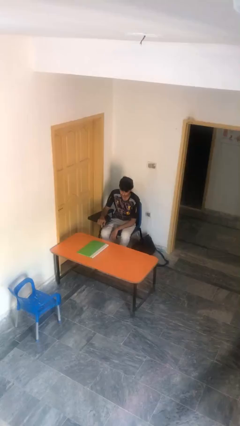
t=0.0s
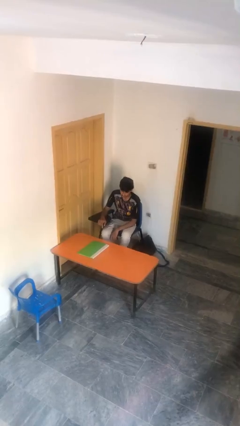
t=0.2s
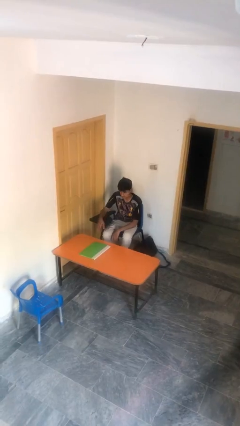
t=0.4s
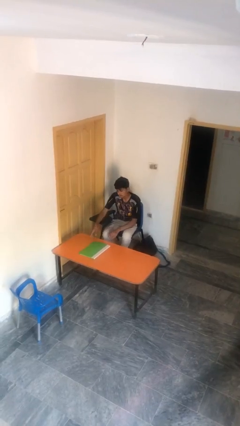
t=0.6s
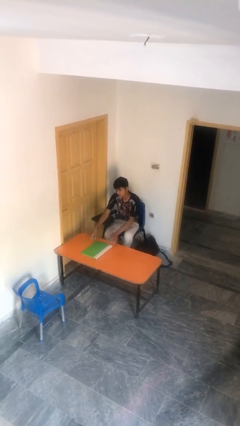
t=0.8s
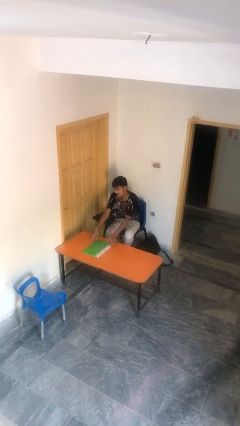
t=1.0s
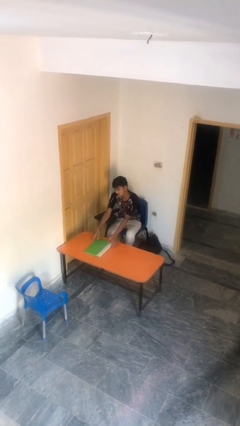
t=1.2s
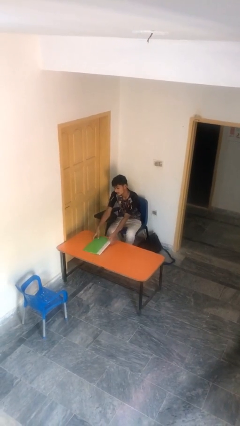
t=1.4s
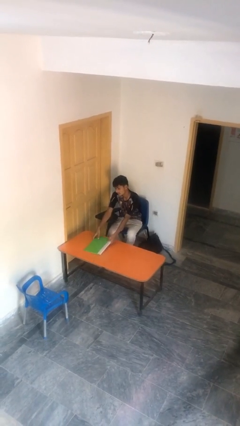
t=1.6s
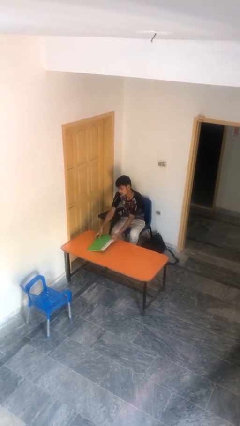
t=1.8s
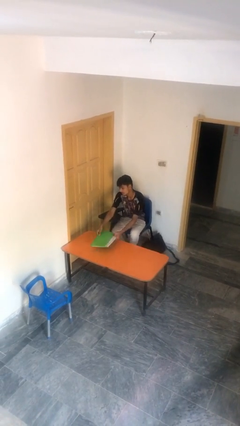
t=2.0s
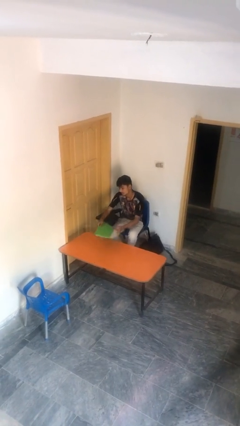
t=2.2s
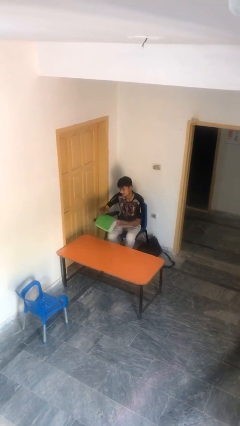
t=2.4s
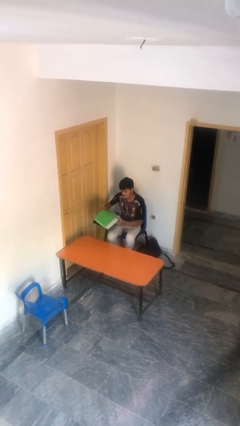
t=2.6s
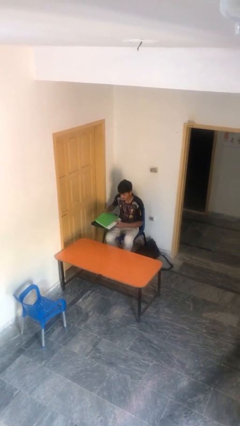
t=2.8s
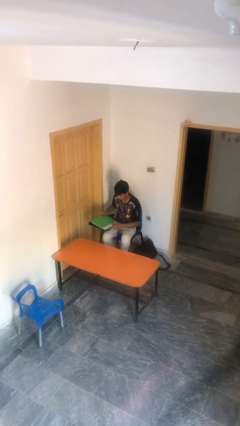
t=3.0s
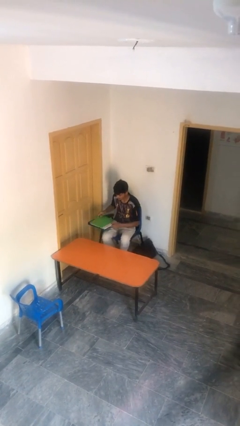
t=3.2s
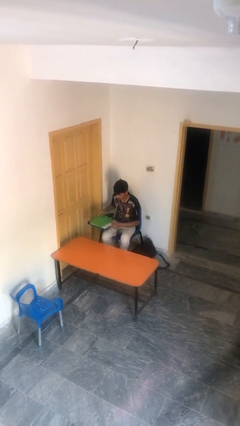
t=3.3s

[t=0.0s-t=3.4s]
person picks up object from table

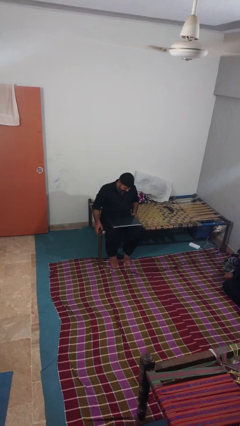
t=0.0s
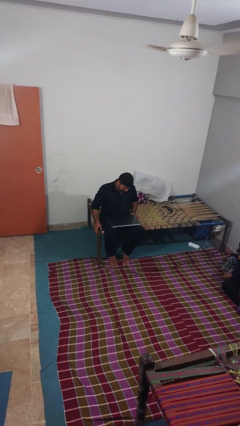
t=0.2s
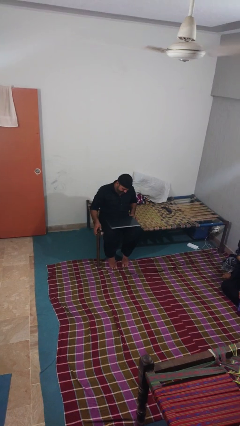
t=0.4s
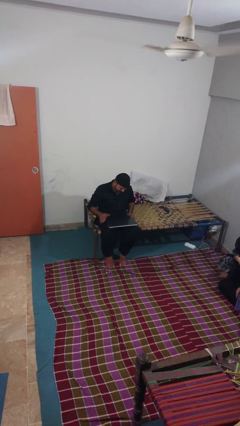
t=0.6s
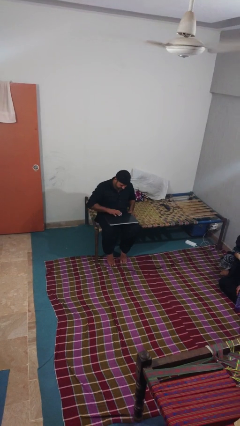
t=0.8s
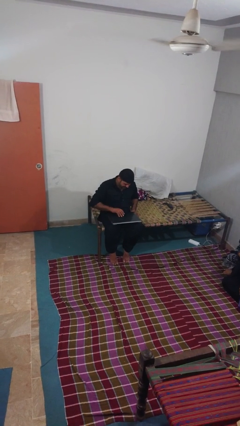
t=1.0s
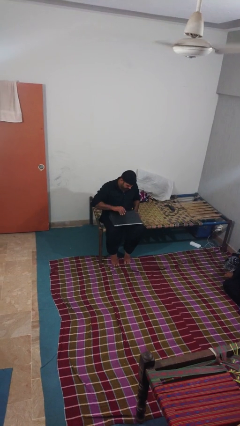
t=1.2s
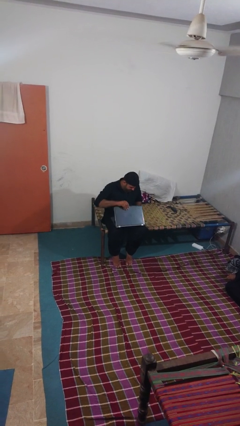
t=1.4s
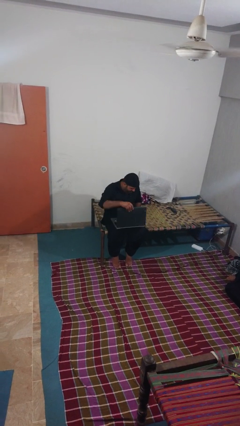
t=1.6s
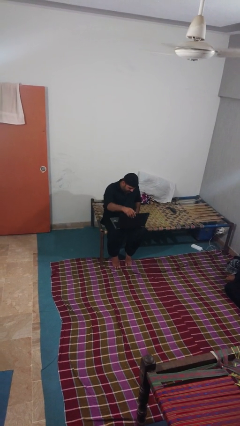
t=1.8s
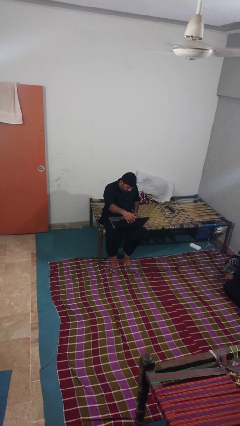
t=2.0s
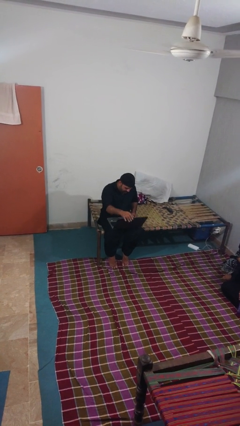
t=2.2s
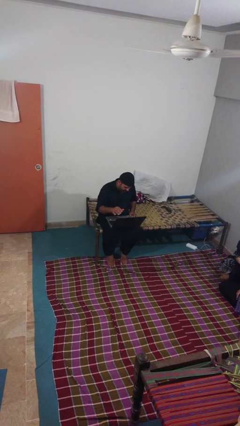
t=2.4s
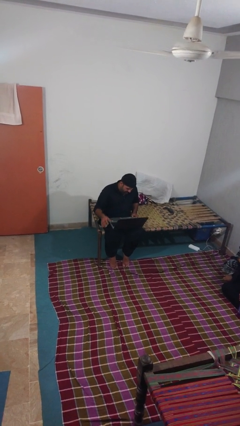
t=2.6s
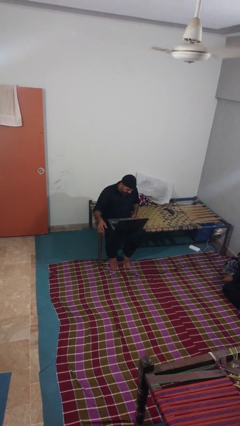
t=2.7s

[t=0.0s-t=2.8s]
person opens laptop

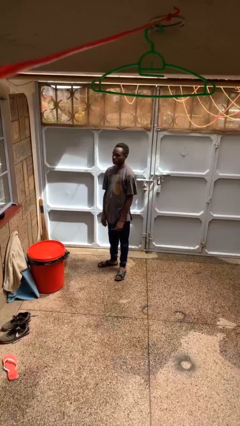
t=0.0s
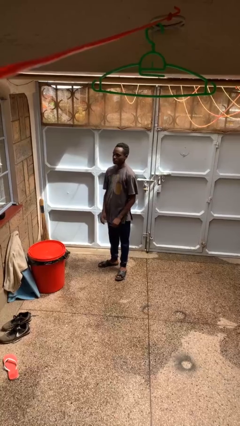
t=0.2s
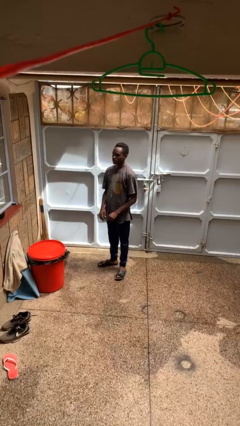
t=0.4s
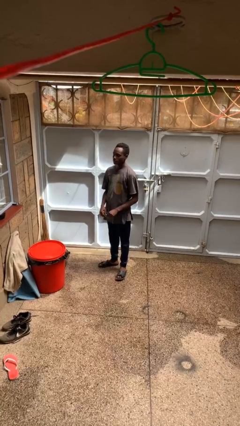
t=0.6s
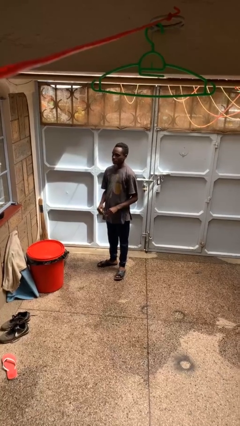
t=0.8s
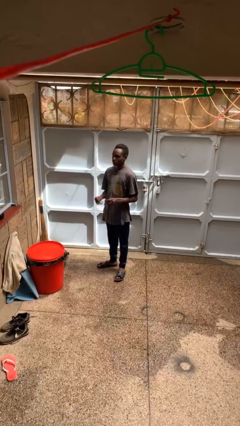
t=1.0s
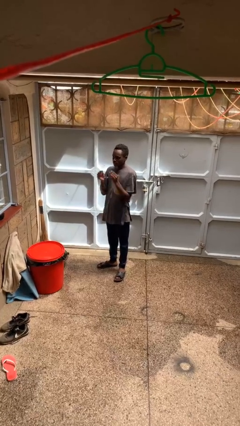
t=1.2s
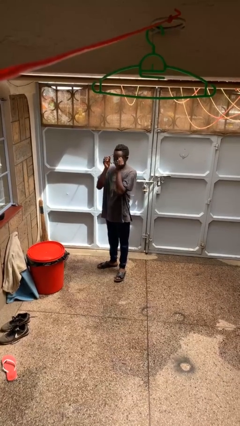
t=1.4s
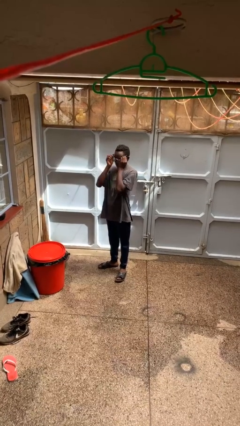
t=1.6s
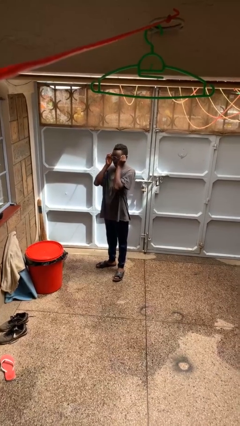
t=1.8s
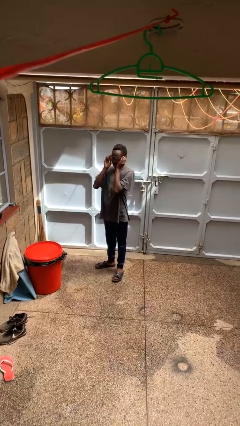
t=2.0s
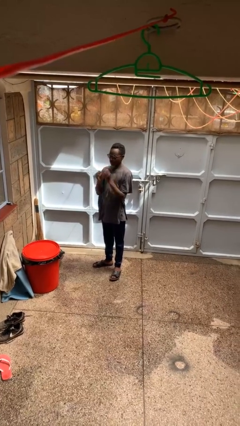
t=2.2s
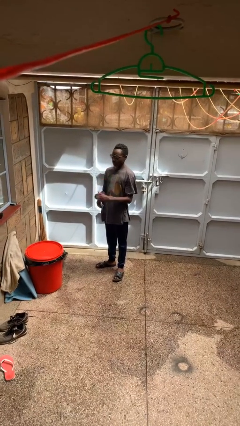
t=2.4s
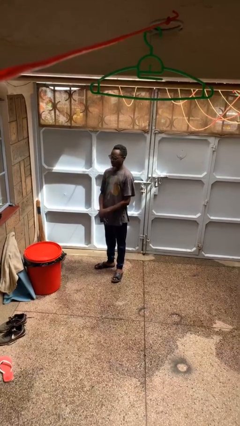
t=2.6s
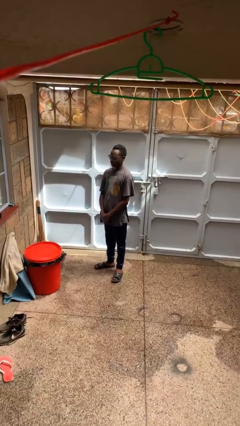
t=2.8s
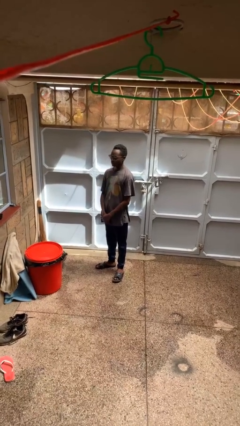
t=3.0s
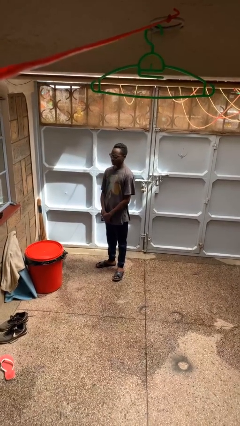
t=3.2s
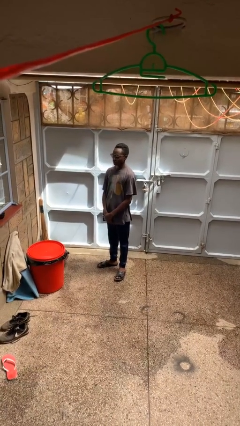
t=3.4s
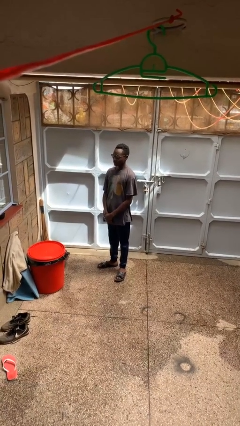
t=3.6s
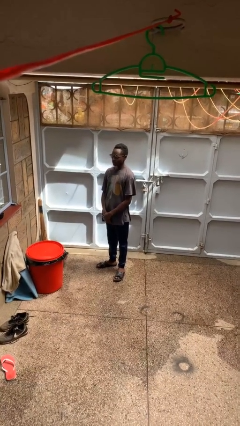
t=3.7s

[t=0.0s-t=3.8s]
person puts on glasses

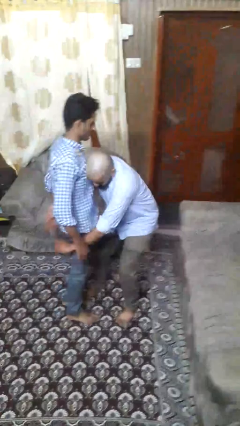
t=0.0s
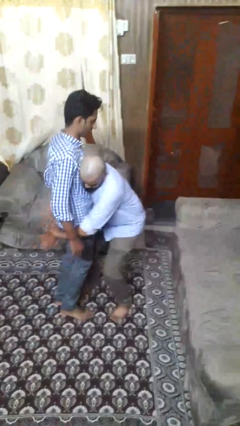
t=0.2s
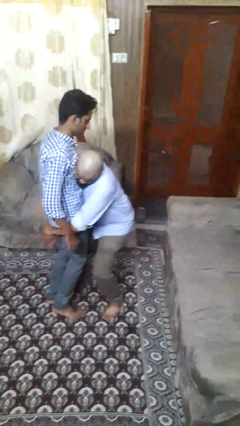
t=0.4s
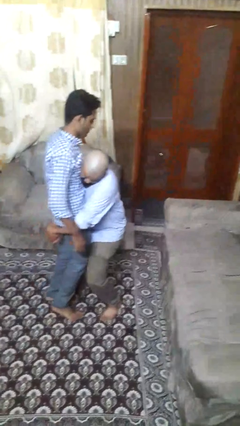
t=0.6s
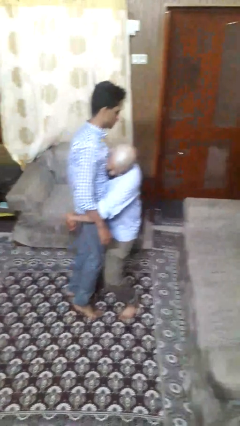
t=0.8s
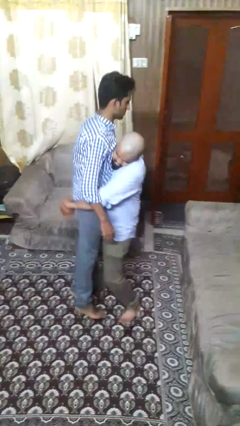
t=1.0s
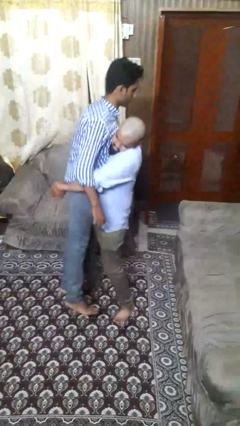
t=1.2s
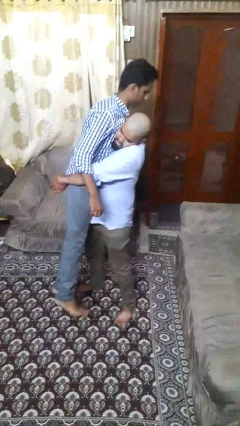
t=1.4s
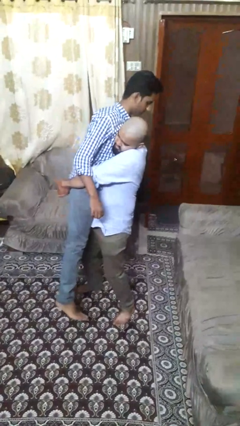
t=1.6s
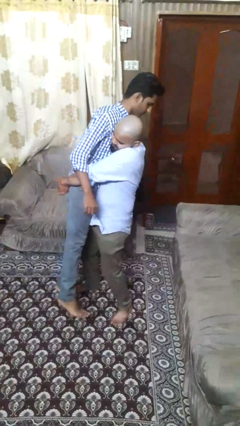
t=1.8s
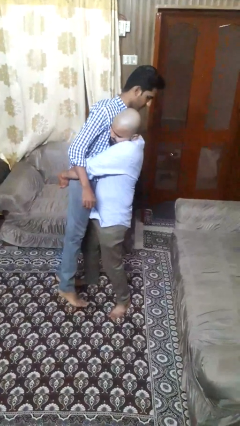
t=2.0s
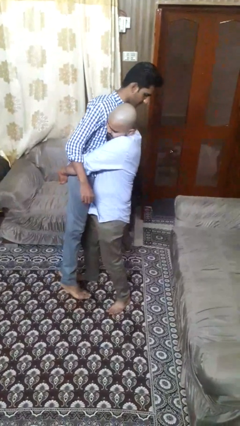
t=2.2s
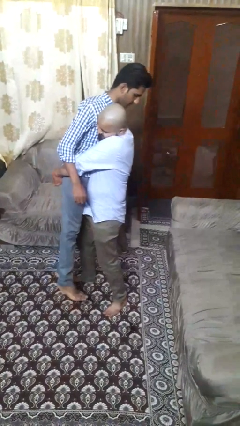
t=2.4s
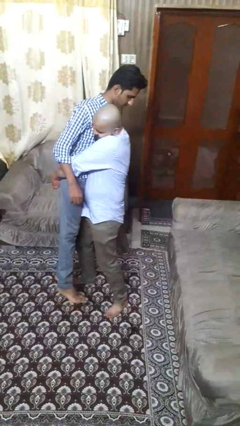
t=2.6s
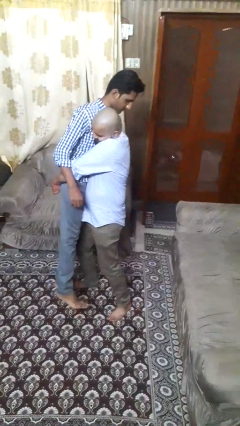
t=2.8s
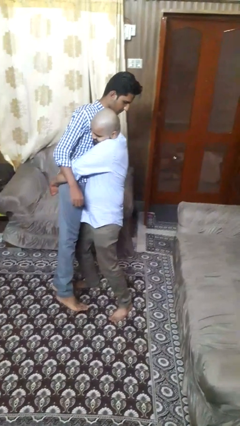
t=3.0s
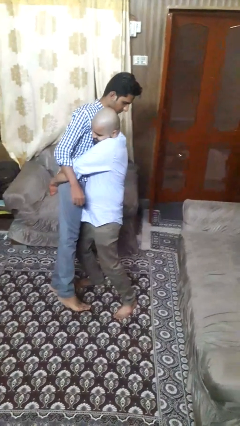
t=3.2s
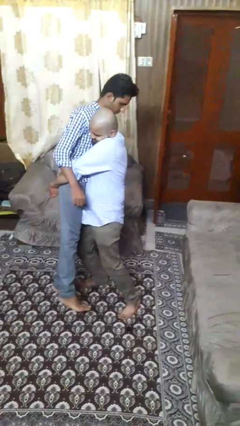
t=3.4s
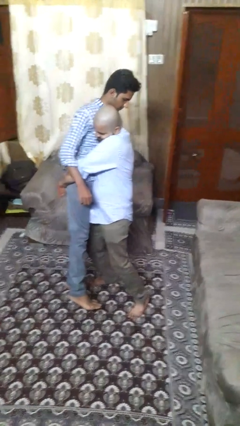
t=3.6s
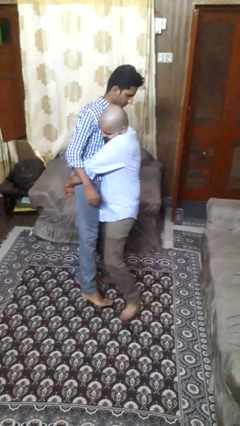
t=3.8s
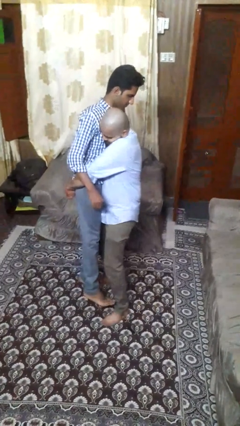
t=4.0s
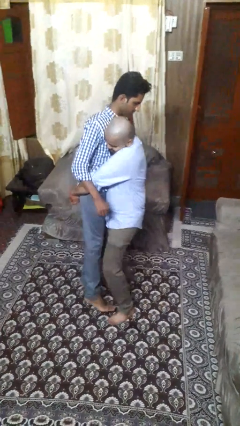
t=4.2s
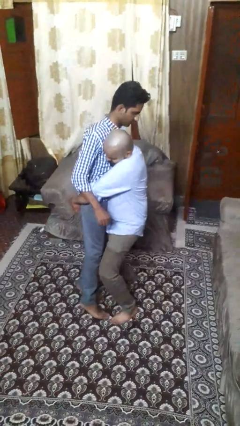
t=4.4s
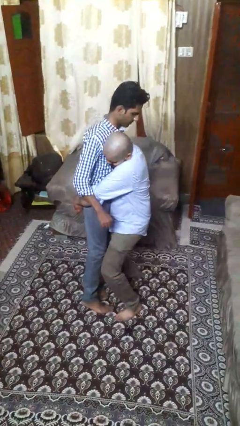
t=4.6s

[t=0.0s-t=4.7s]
person picks up person

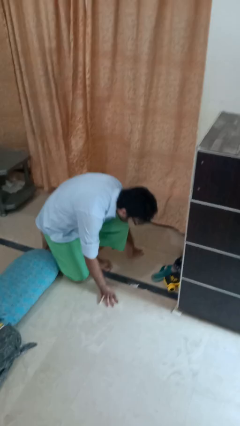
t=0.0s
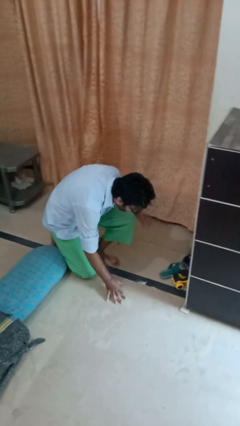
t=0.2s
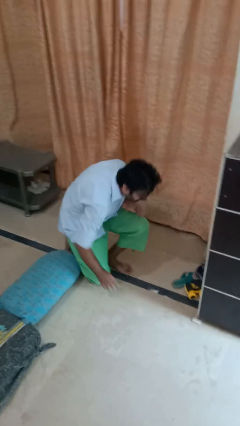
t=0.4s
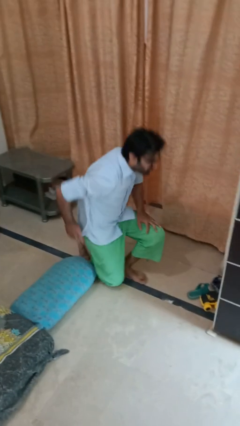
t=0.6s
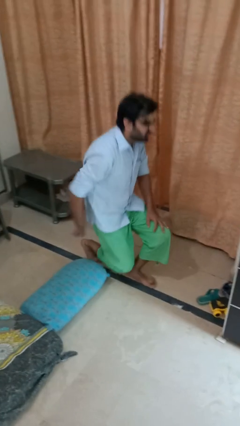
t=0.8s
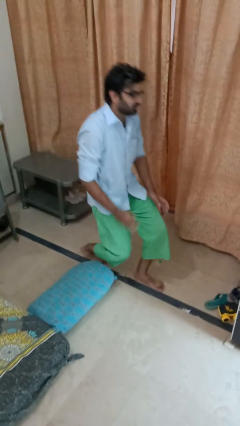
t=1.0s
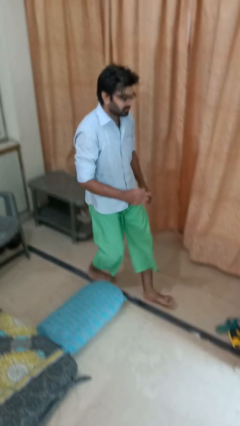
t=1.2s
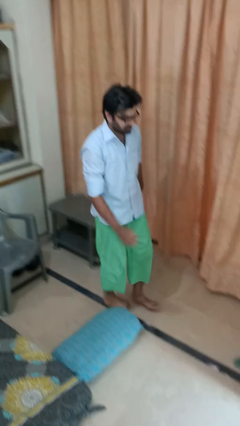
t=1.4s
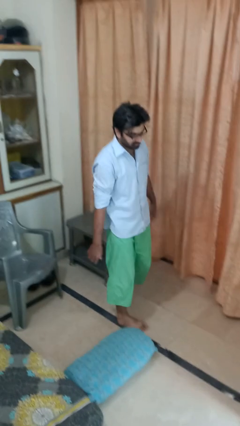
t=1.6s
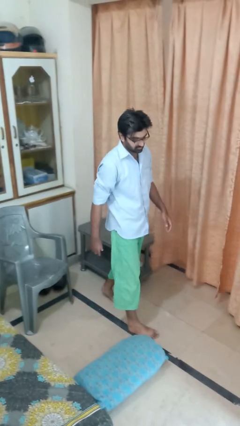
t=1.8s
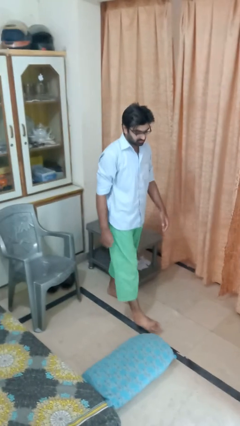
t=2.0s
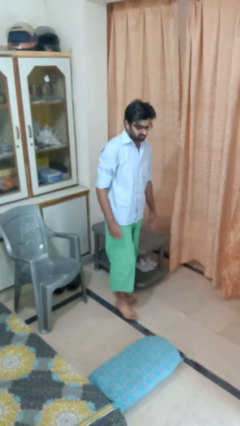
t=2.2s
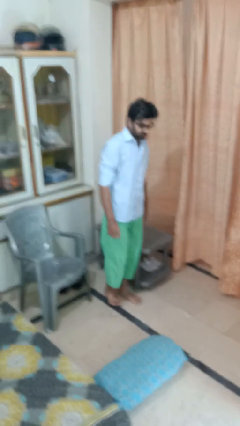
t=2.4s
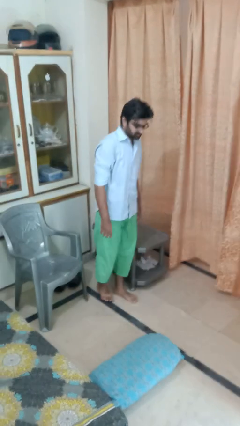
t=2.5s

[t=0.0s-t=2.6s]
person stands up from floor

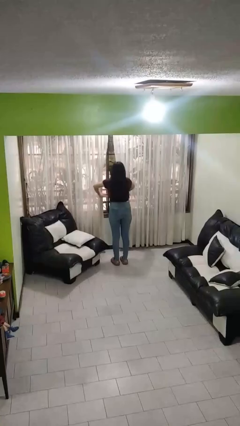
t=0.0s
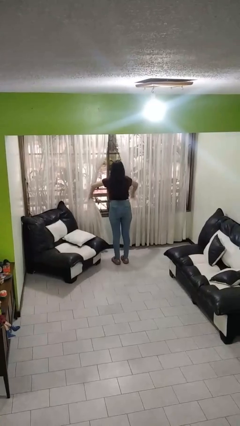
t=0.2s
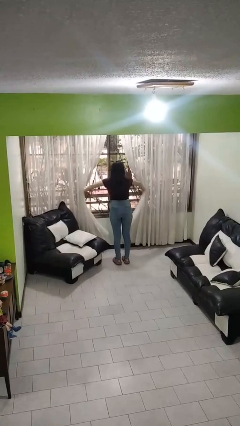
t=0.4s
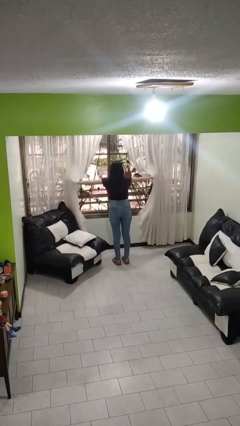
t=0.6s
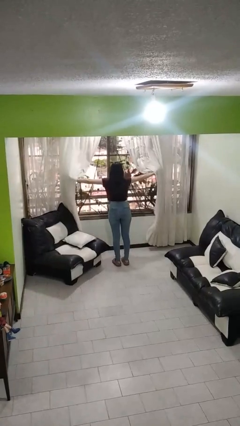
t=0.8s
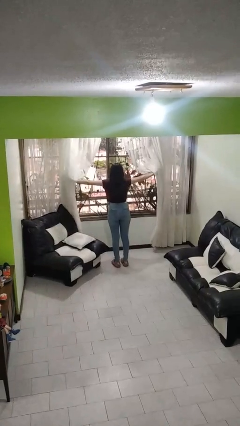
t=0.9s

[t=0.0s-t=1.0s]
person opens curtains
